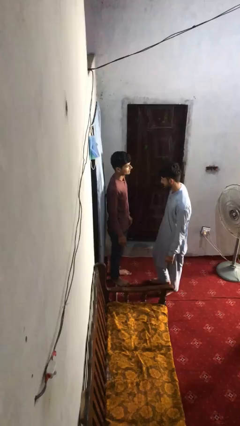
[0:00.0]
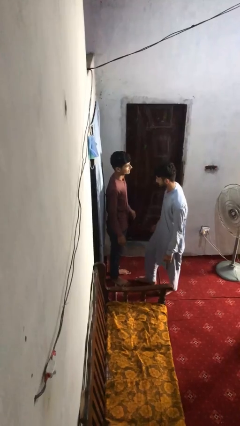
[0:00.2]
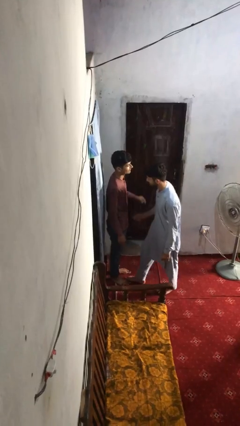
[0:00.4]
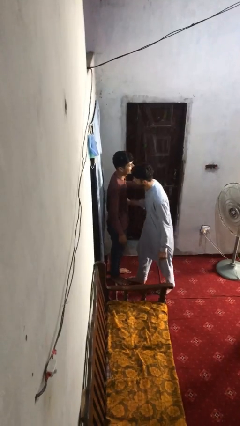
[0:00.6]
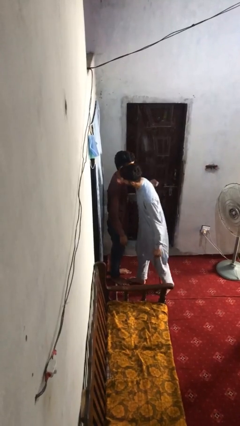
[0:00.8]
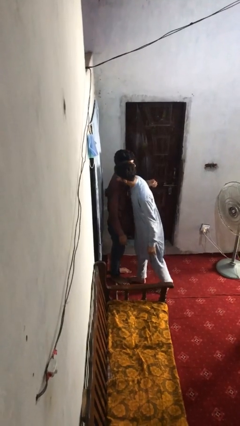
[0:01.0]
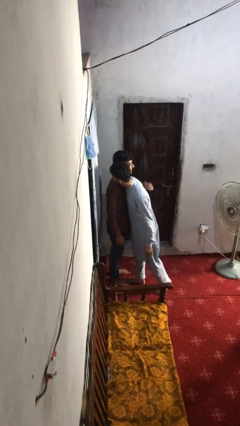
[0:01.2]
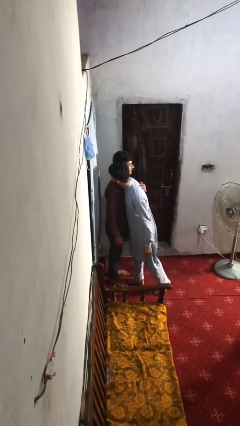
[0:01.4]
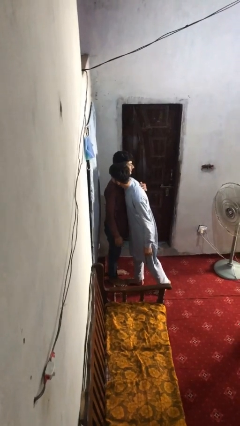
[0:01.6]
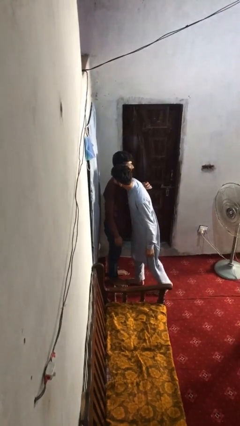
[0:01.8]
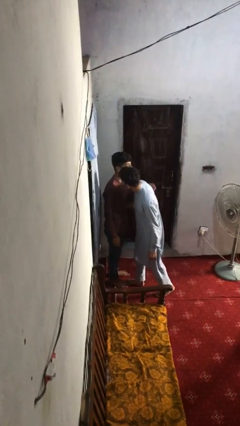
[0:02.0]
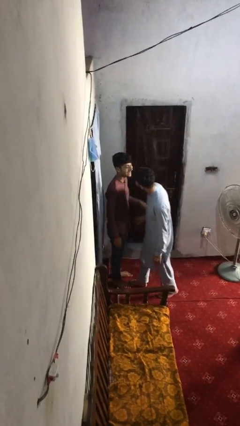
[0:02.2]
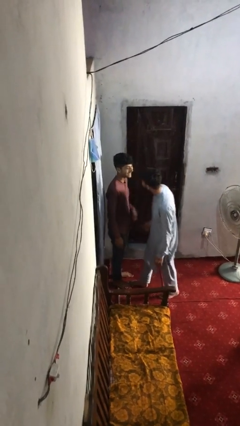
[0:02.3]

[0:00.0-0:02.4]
person embraces person

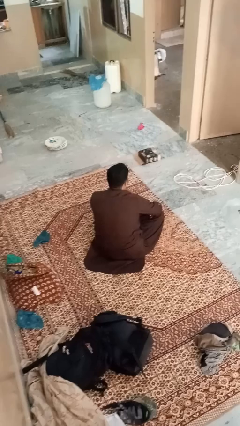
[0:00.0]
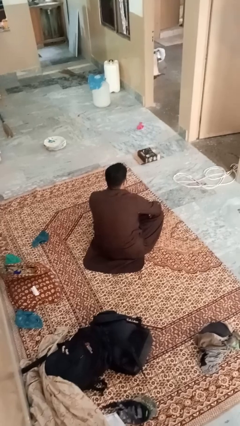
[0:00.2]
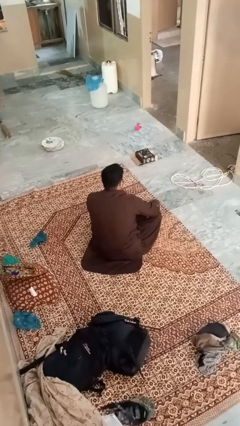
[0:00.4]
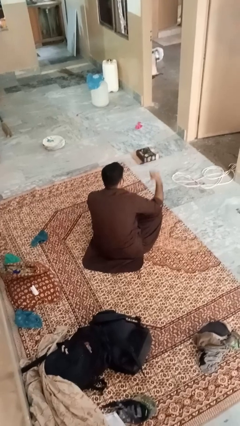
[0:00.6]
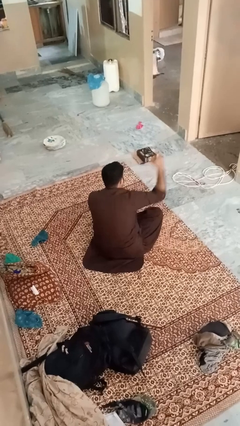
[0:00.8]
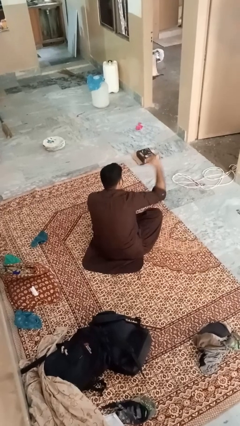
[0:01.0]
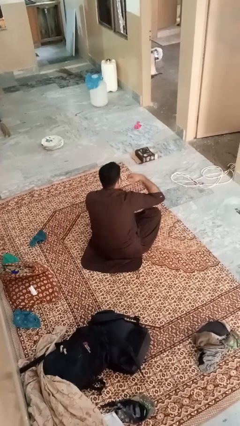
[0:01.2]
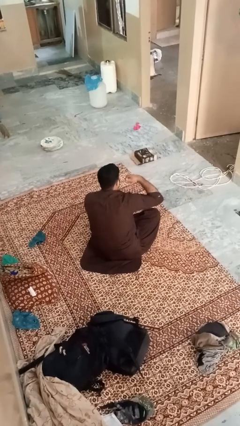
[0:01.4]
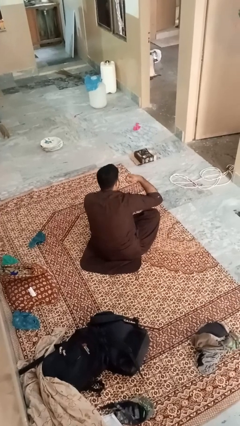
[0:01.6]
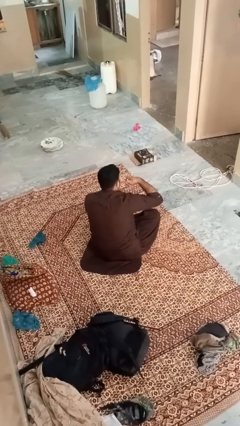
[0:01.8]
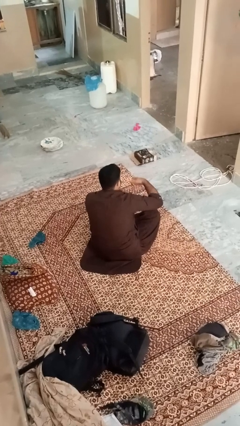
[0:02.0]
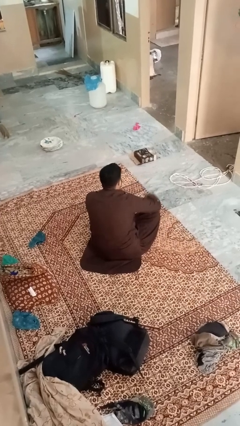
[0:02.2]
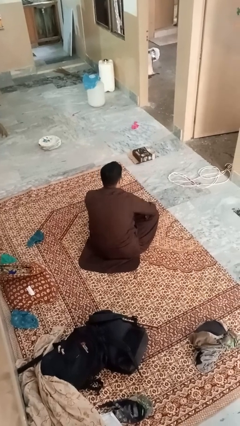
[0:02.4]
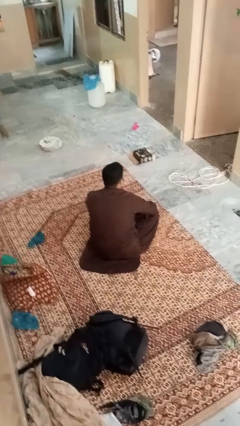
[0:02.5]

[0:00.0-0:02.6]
person gestures call me

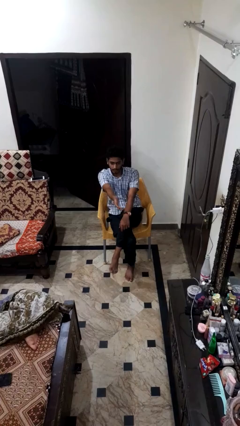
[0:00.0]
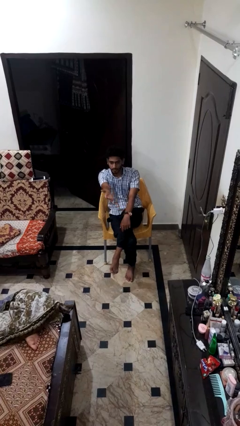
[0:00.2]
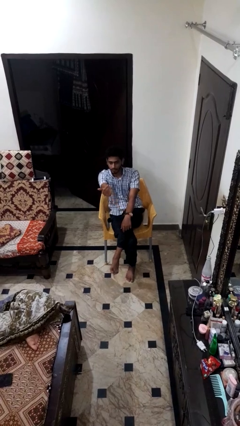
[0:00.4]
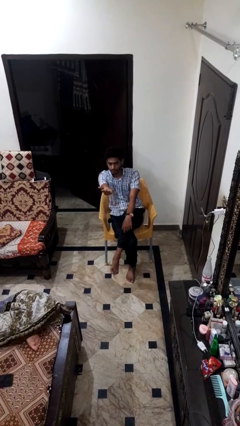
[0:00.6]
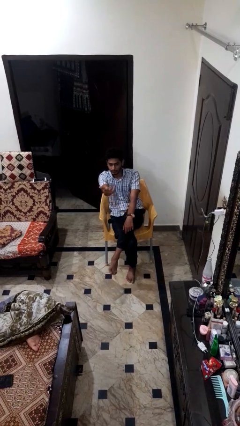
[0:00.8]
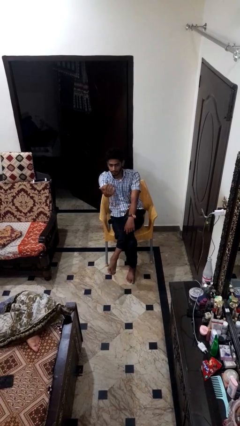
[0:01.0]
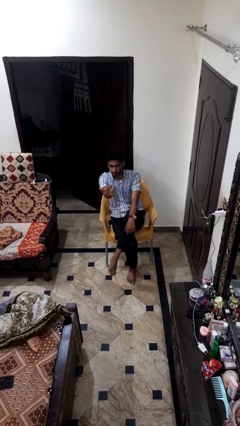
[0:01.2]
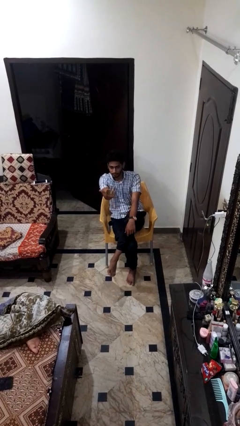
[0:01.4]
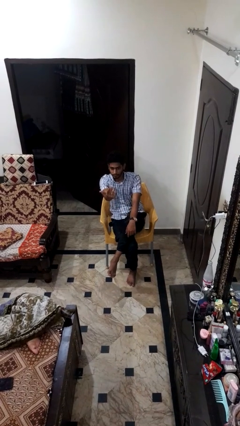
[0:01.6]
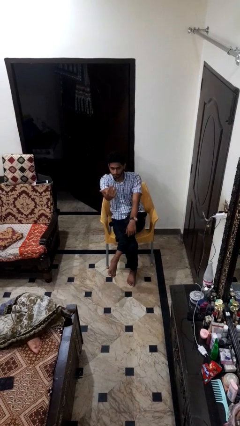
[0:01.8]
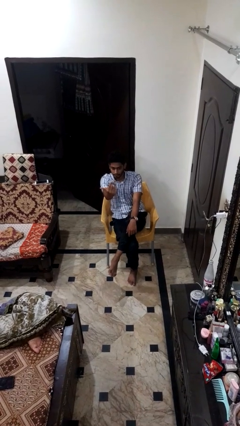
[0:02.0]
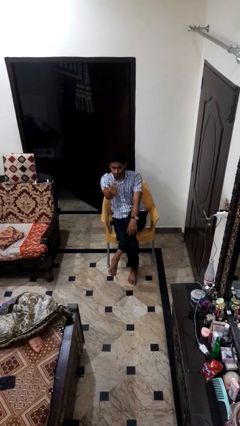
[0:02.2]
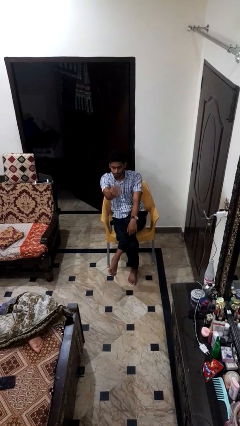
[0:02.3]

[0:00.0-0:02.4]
person gestures come here

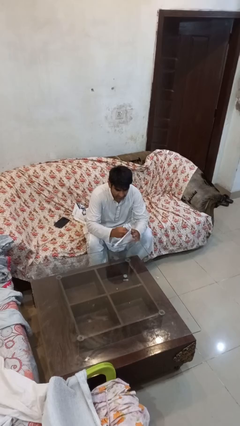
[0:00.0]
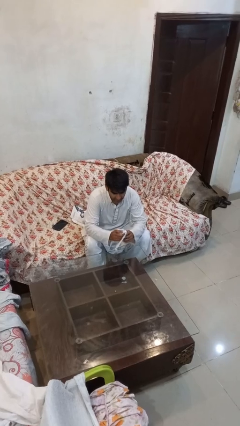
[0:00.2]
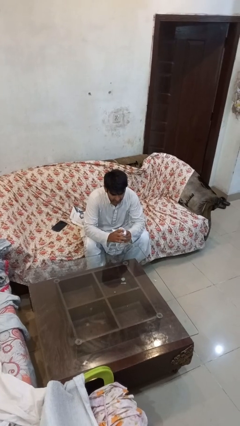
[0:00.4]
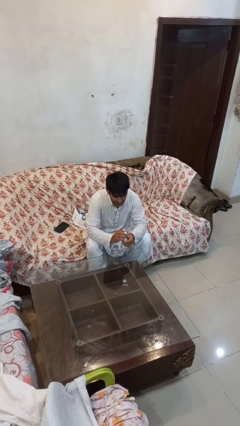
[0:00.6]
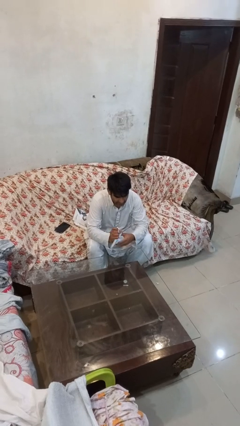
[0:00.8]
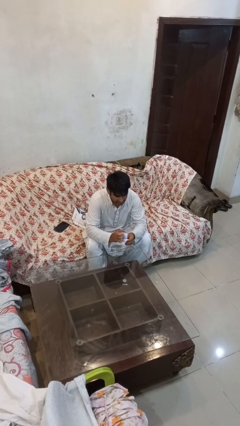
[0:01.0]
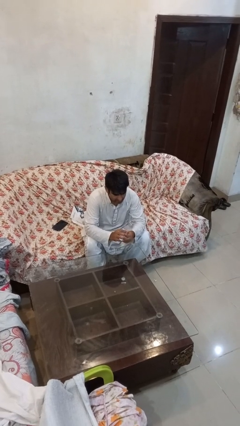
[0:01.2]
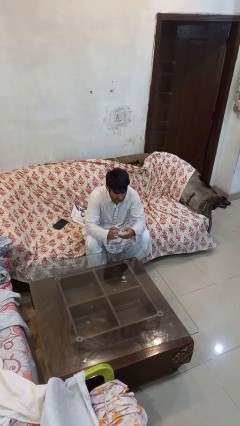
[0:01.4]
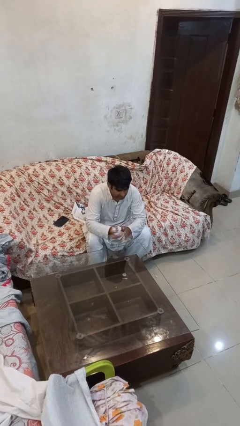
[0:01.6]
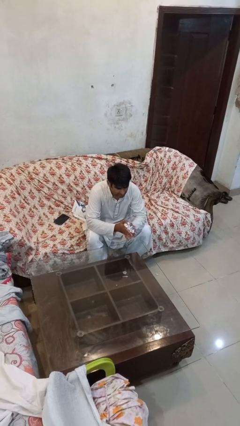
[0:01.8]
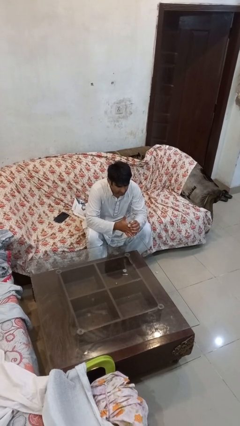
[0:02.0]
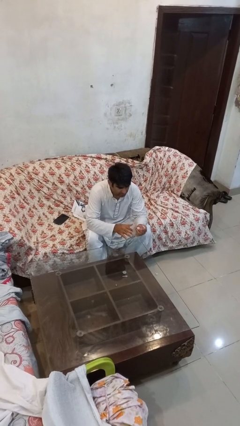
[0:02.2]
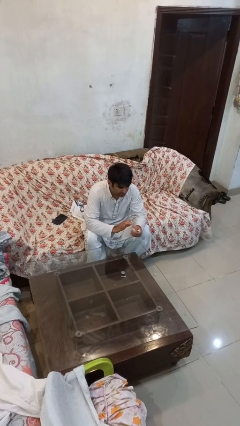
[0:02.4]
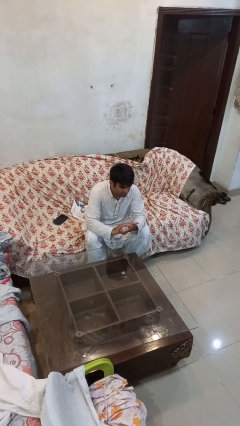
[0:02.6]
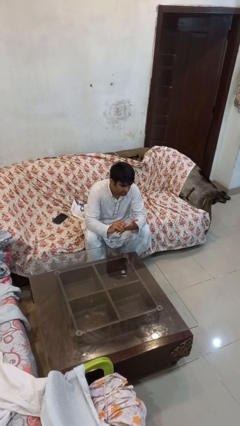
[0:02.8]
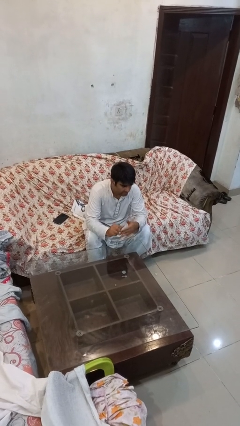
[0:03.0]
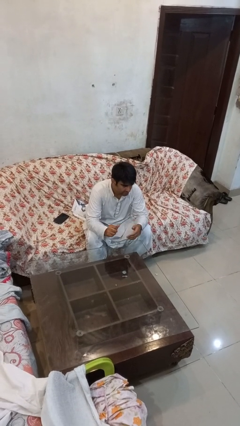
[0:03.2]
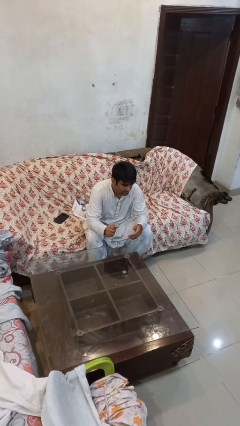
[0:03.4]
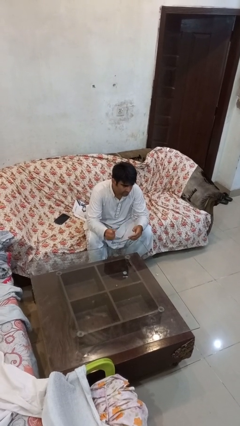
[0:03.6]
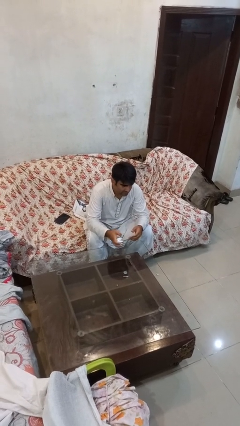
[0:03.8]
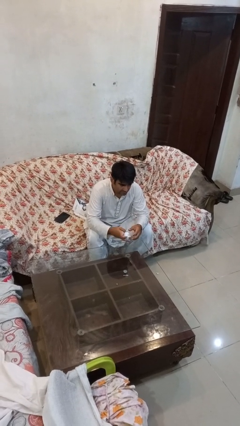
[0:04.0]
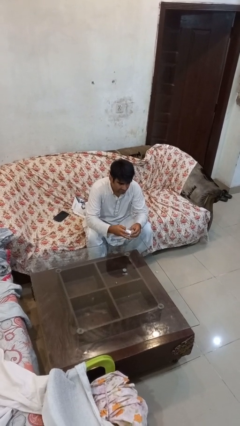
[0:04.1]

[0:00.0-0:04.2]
person crumples paper

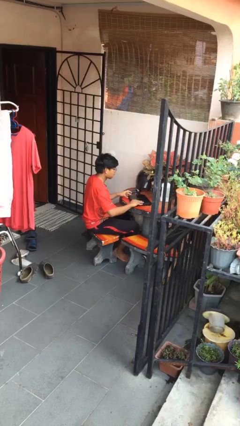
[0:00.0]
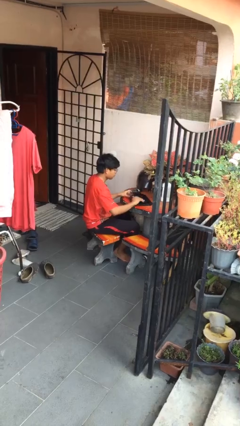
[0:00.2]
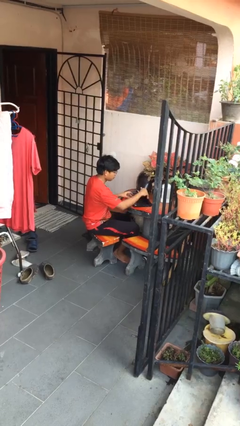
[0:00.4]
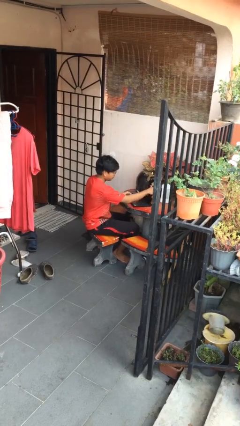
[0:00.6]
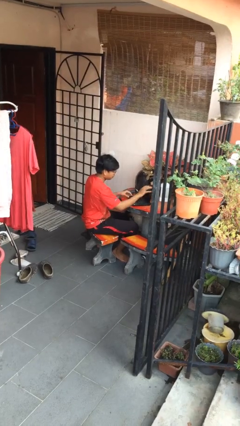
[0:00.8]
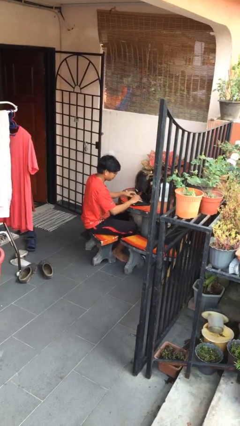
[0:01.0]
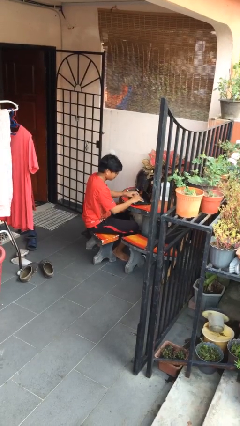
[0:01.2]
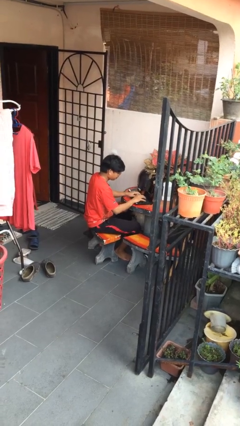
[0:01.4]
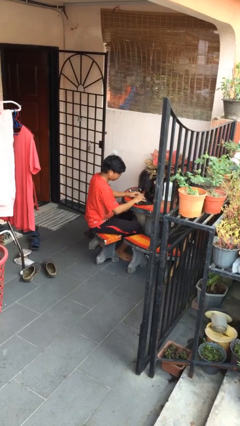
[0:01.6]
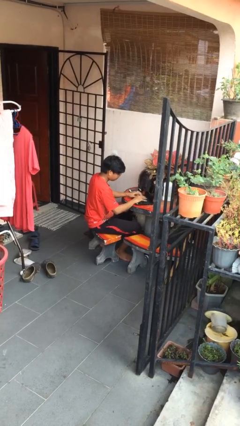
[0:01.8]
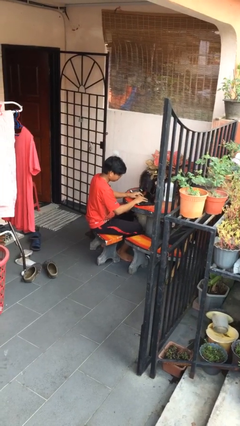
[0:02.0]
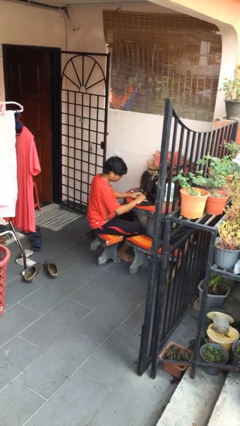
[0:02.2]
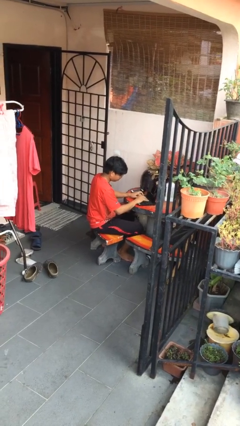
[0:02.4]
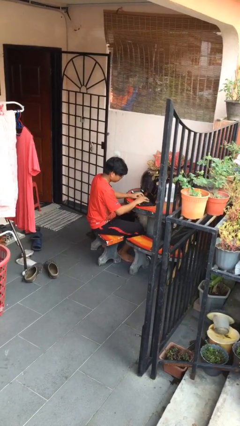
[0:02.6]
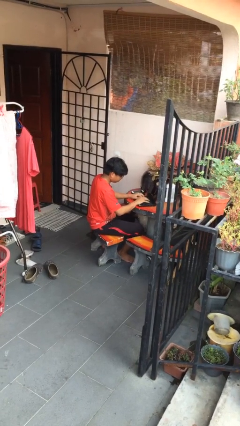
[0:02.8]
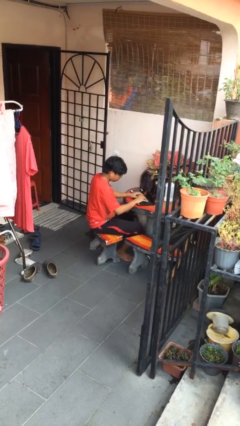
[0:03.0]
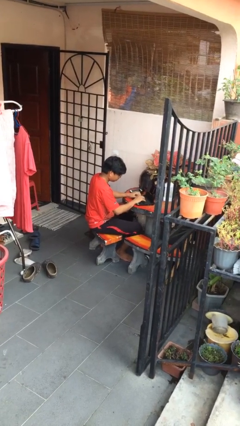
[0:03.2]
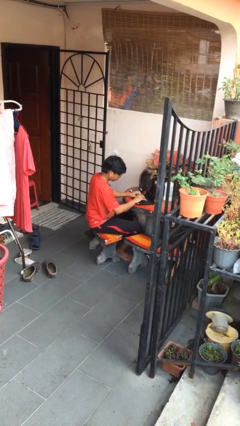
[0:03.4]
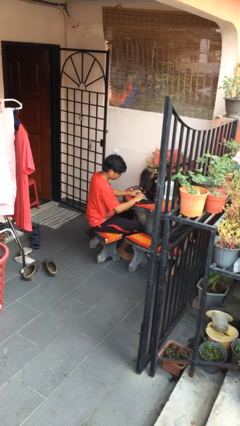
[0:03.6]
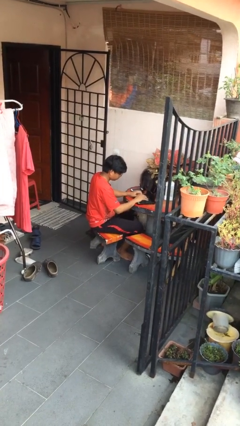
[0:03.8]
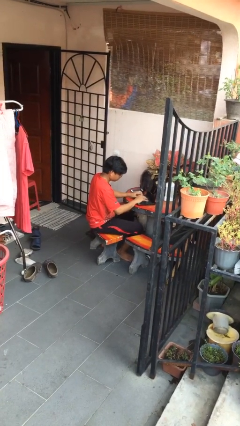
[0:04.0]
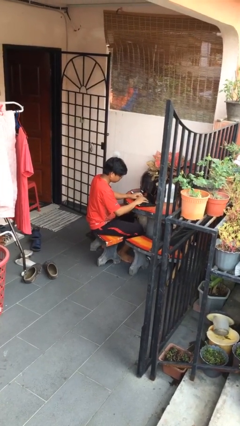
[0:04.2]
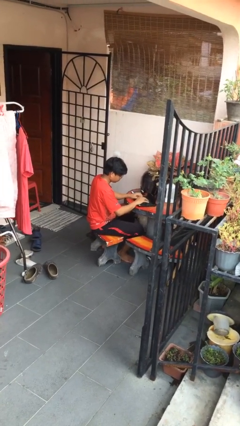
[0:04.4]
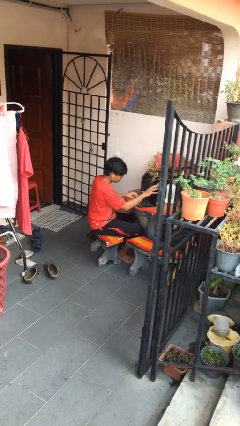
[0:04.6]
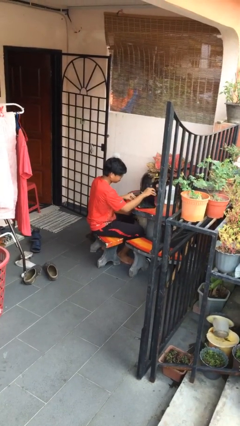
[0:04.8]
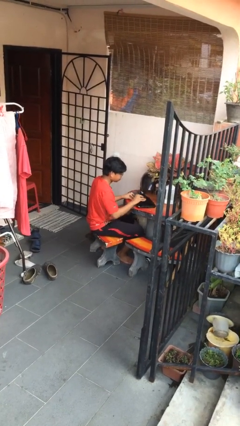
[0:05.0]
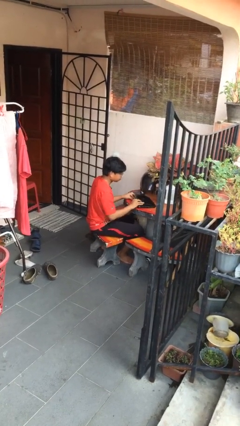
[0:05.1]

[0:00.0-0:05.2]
person interacts with laptop
